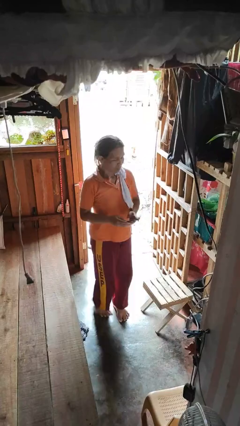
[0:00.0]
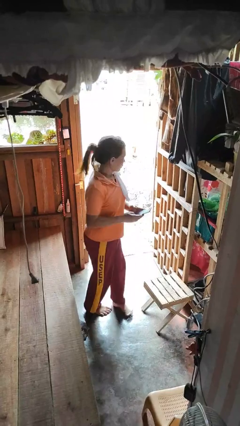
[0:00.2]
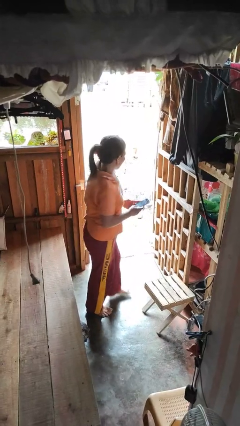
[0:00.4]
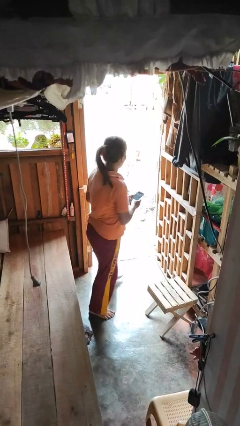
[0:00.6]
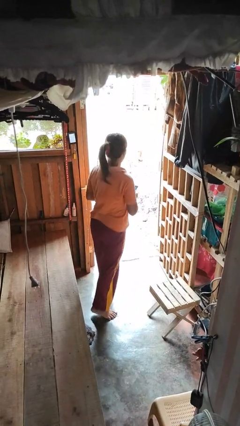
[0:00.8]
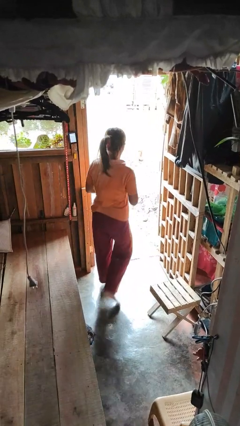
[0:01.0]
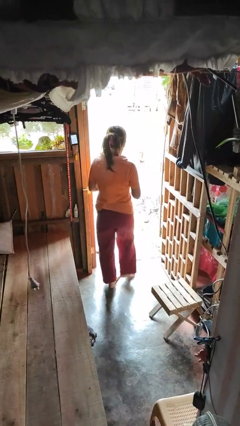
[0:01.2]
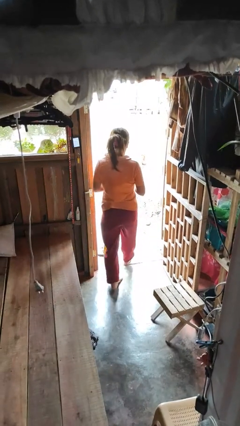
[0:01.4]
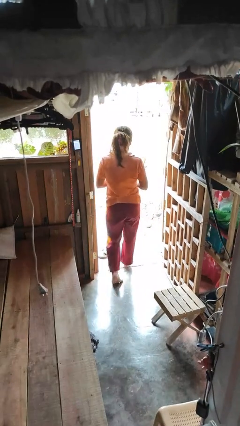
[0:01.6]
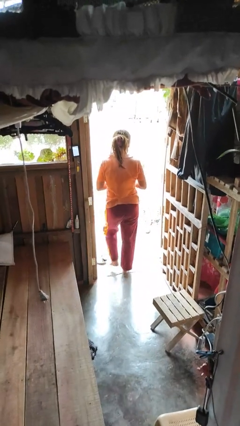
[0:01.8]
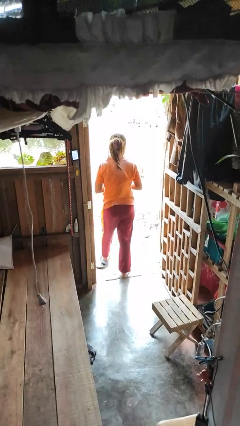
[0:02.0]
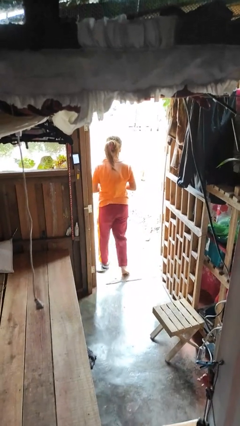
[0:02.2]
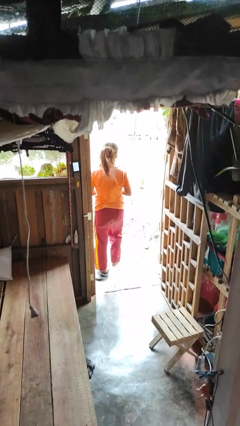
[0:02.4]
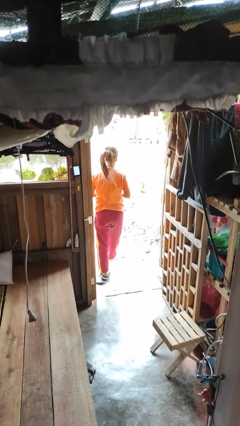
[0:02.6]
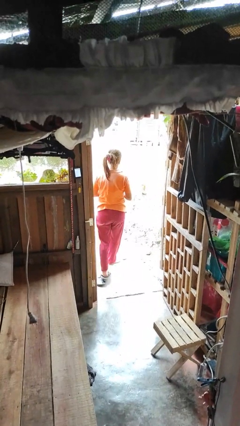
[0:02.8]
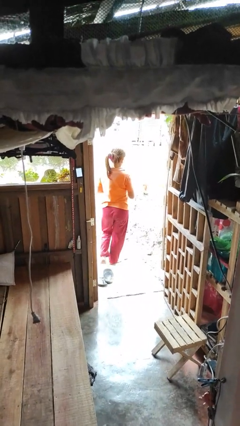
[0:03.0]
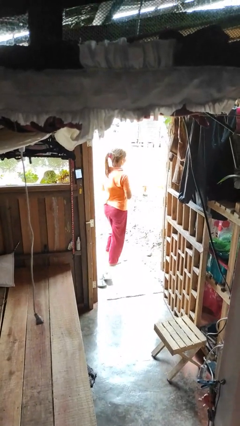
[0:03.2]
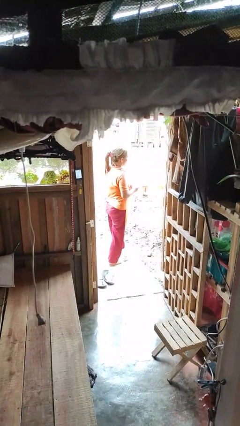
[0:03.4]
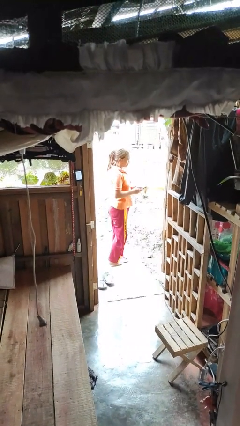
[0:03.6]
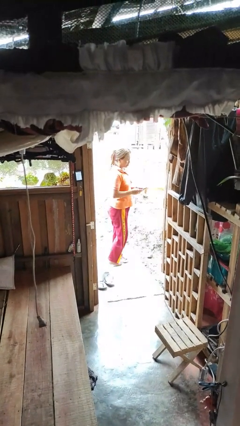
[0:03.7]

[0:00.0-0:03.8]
person exits scene through structure

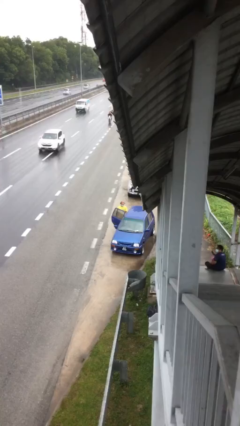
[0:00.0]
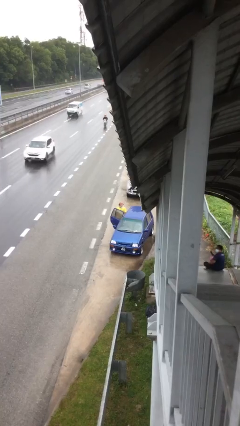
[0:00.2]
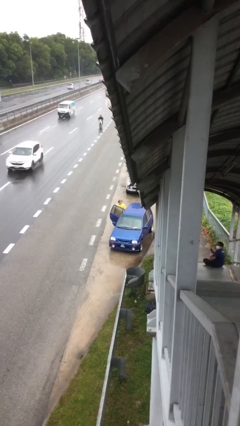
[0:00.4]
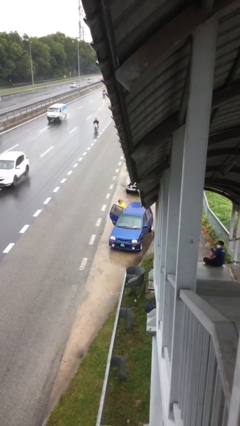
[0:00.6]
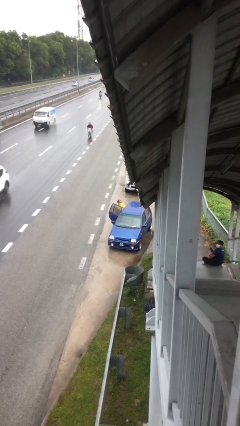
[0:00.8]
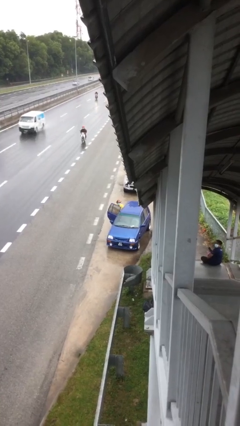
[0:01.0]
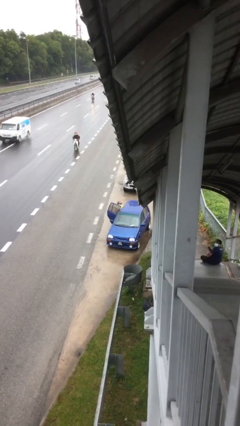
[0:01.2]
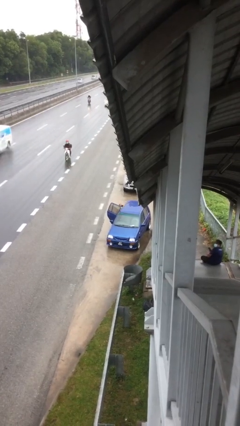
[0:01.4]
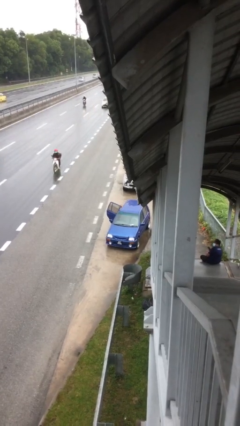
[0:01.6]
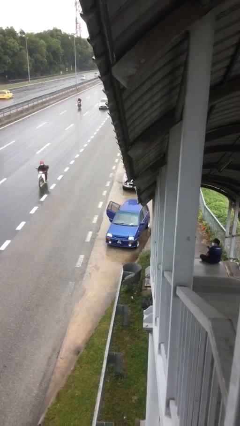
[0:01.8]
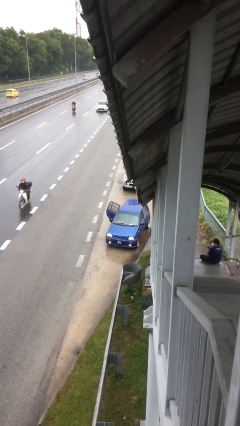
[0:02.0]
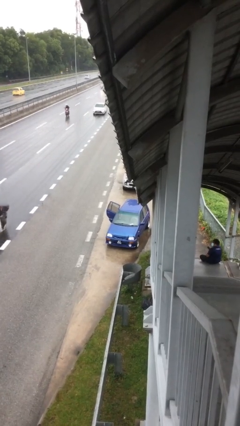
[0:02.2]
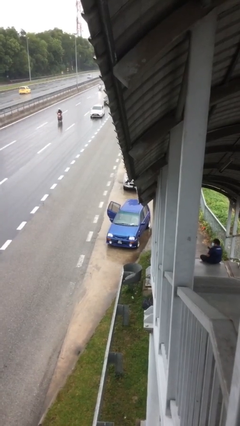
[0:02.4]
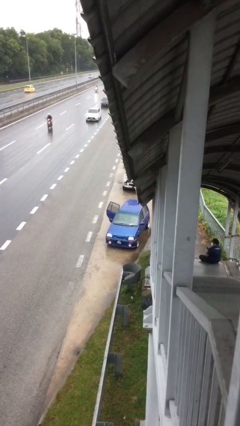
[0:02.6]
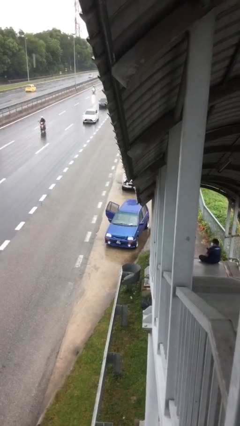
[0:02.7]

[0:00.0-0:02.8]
person enters car

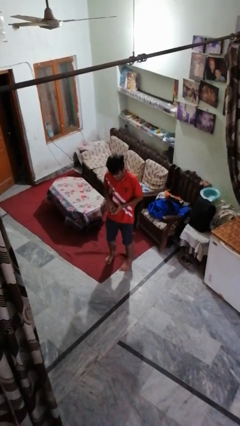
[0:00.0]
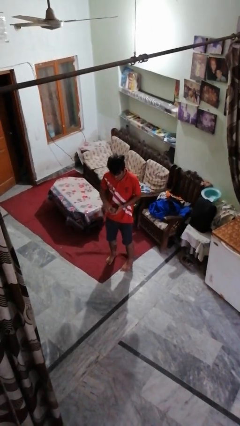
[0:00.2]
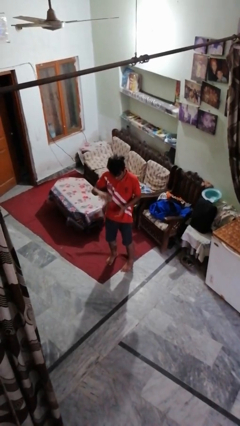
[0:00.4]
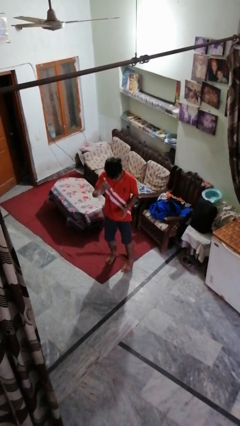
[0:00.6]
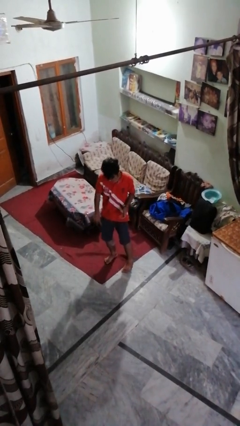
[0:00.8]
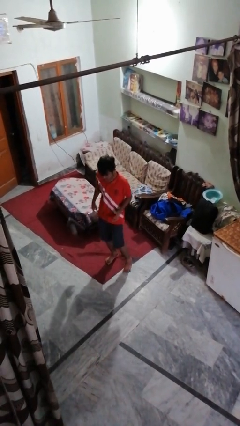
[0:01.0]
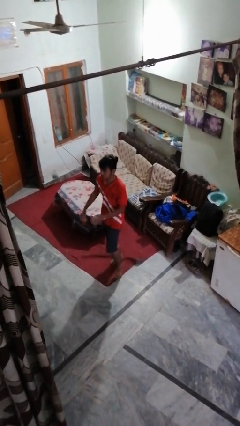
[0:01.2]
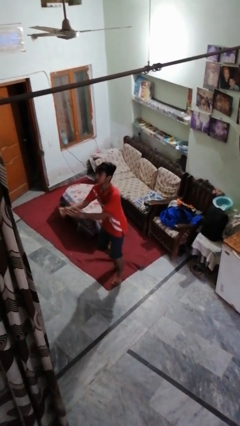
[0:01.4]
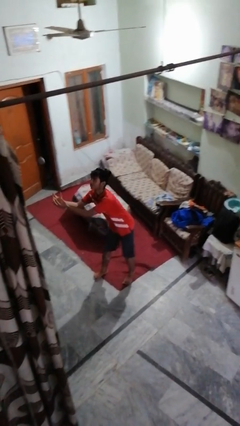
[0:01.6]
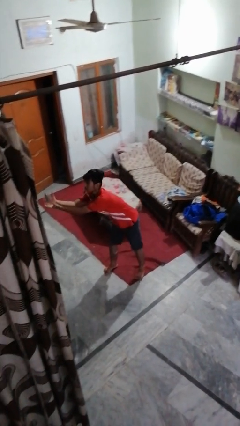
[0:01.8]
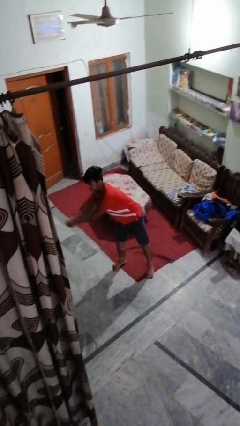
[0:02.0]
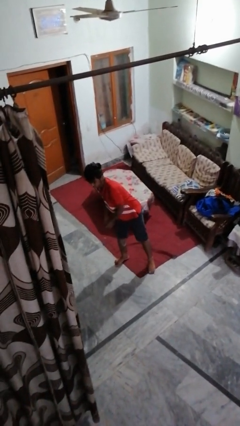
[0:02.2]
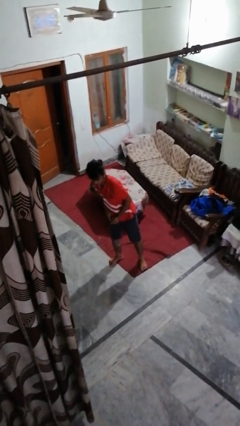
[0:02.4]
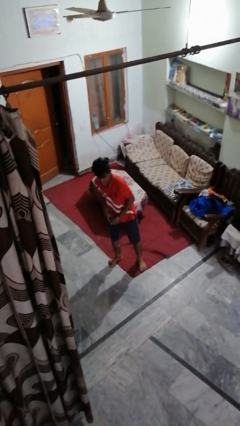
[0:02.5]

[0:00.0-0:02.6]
person bounces ball on floor

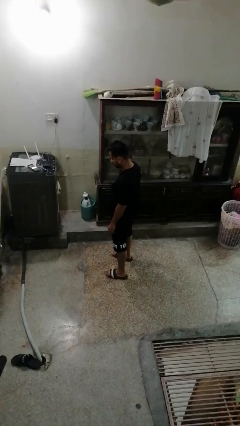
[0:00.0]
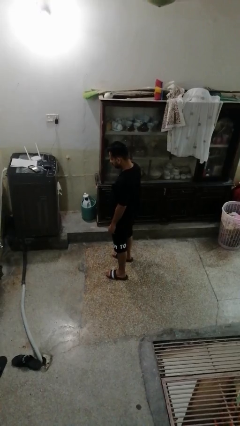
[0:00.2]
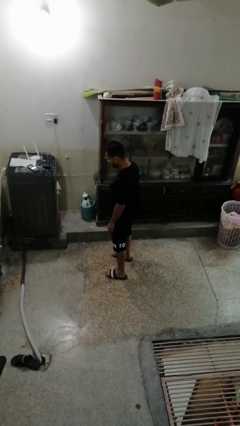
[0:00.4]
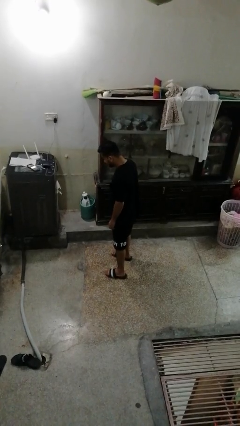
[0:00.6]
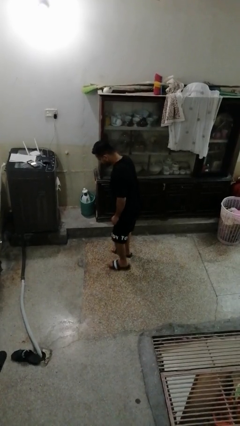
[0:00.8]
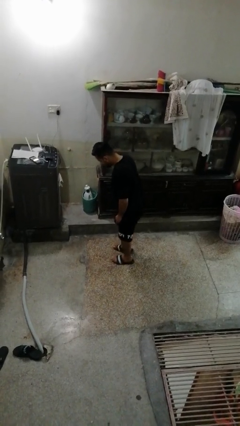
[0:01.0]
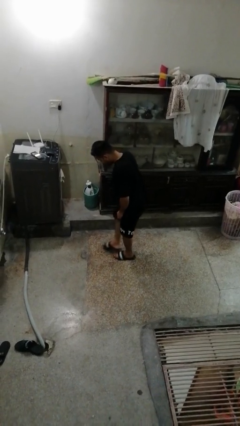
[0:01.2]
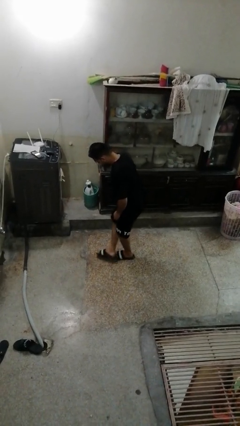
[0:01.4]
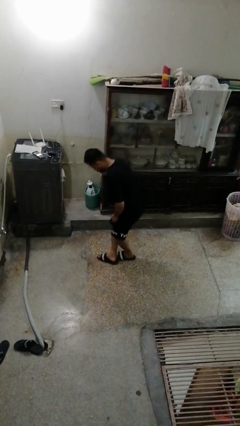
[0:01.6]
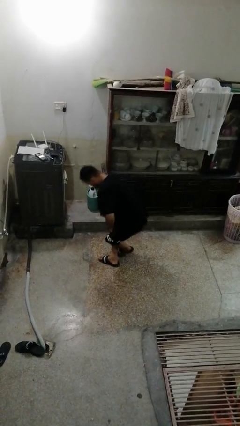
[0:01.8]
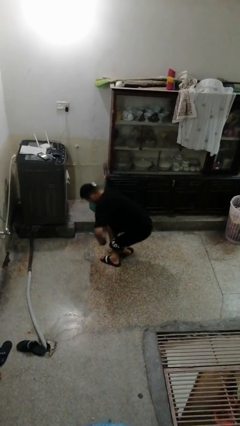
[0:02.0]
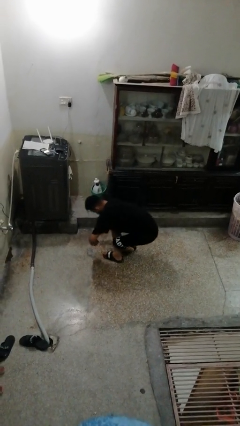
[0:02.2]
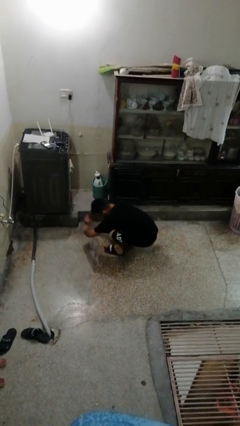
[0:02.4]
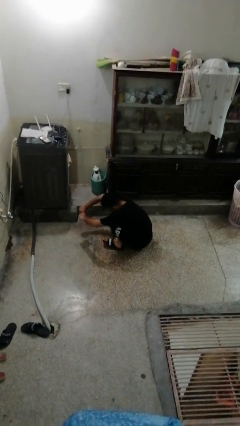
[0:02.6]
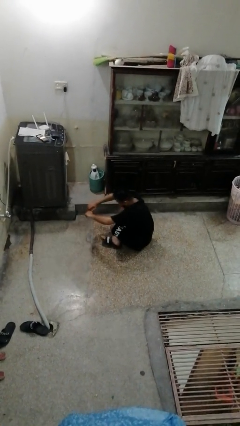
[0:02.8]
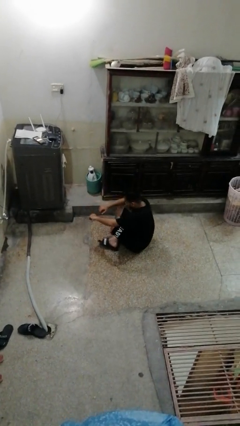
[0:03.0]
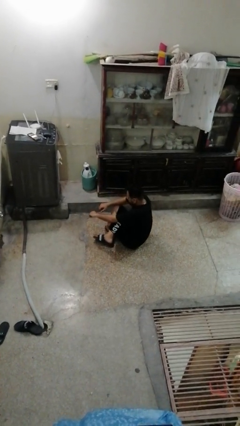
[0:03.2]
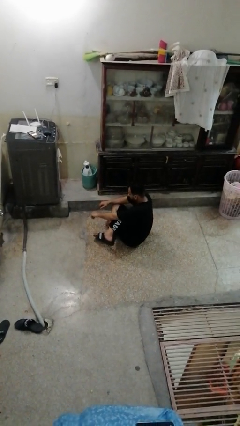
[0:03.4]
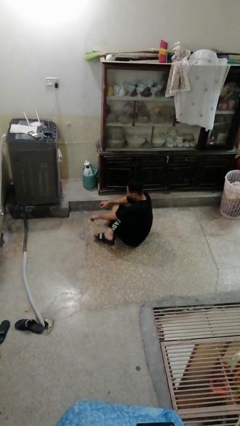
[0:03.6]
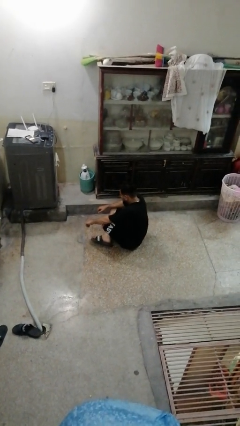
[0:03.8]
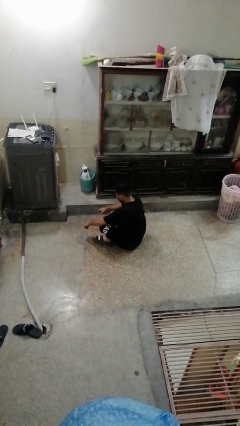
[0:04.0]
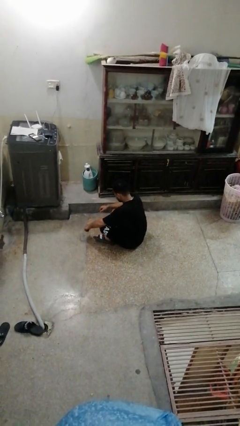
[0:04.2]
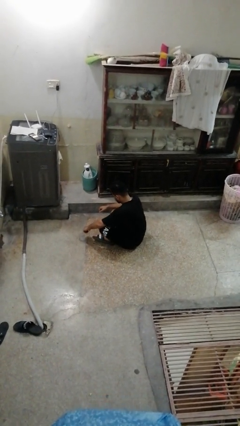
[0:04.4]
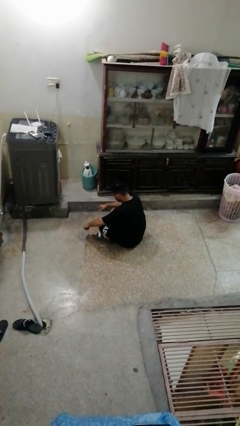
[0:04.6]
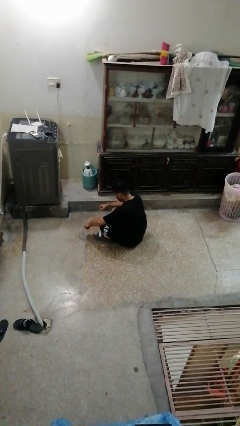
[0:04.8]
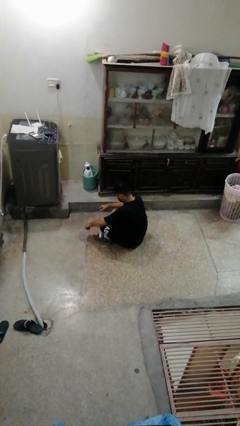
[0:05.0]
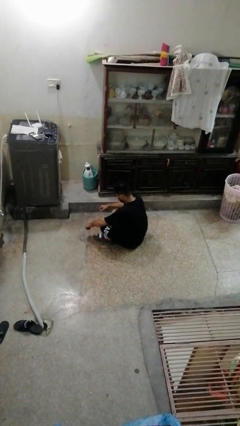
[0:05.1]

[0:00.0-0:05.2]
person sits crisscross

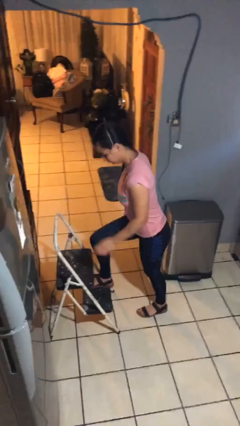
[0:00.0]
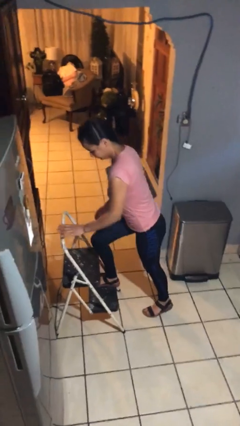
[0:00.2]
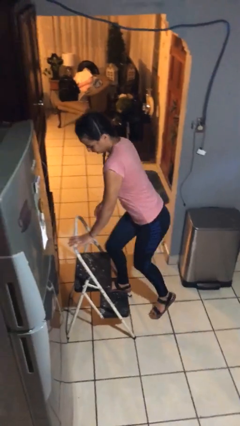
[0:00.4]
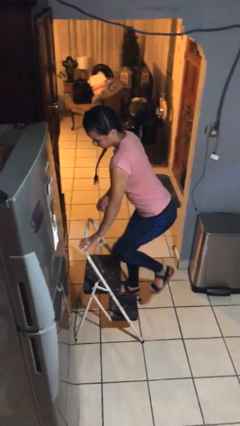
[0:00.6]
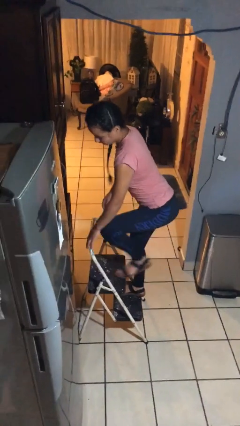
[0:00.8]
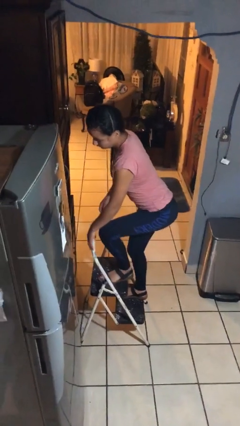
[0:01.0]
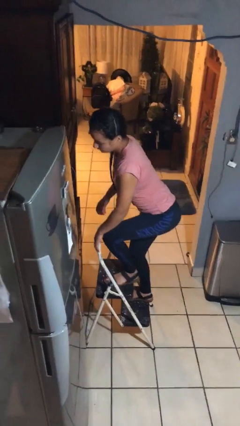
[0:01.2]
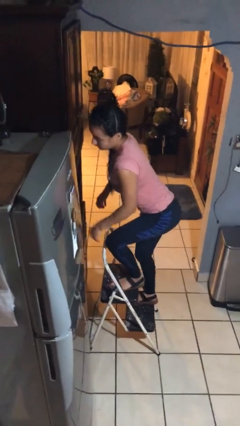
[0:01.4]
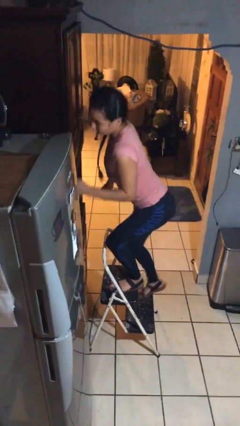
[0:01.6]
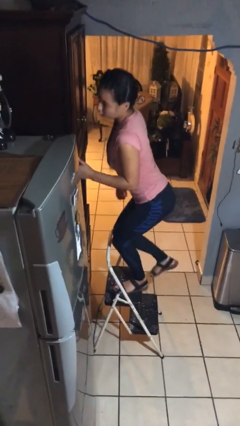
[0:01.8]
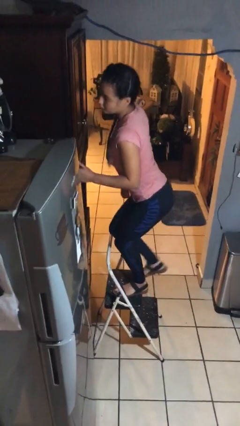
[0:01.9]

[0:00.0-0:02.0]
person climbs up ladder

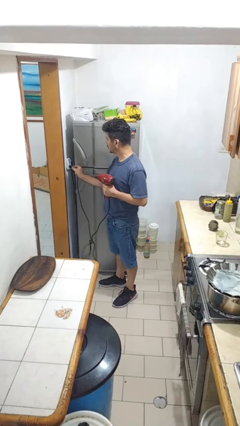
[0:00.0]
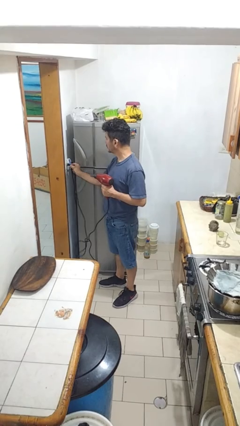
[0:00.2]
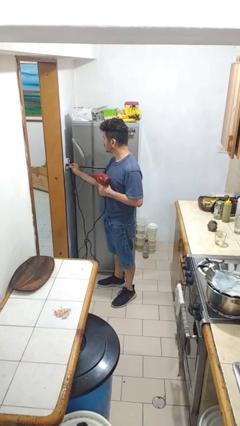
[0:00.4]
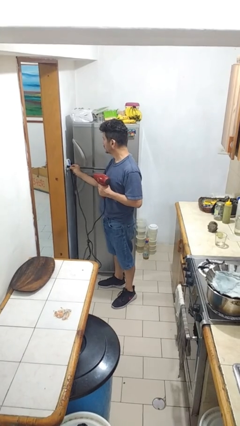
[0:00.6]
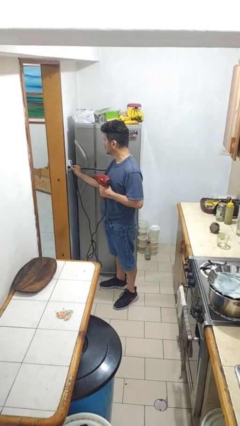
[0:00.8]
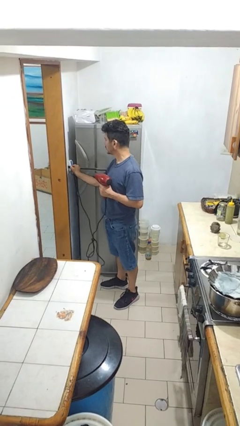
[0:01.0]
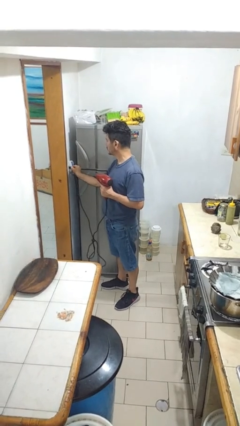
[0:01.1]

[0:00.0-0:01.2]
person plugs into electrical socket
